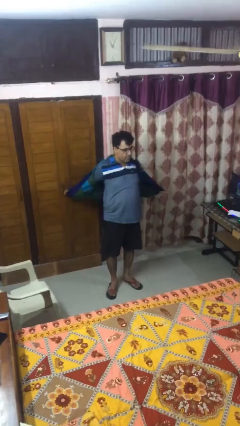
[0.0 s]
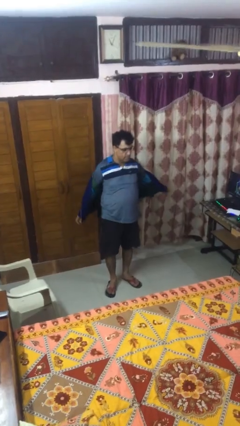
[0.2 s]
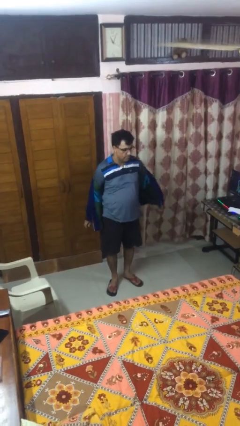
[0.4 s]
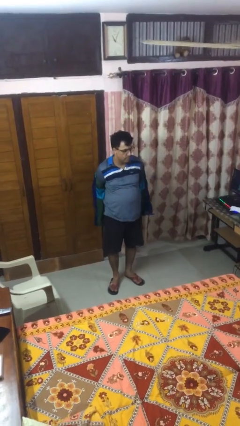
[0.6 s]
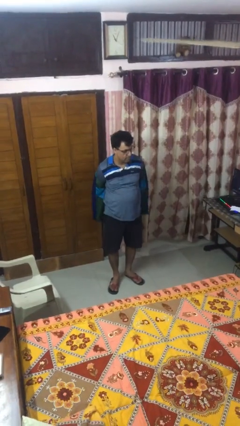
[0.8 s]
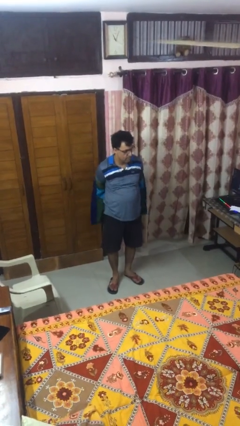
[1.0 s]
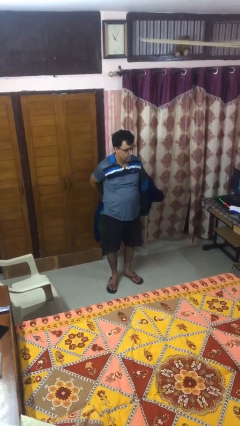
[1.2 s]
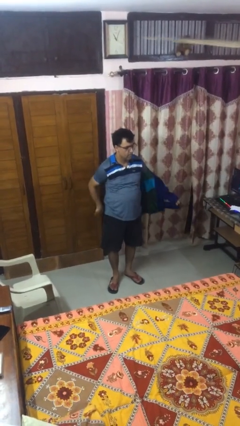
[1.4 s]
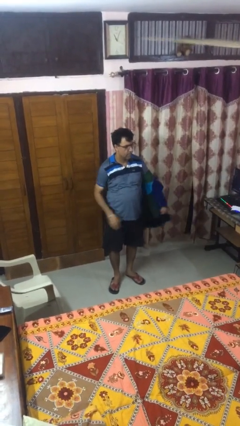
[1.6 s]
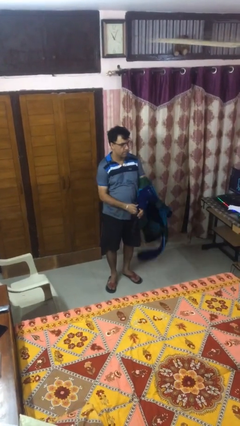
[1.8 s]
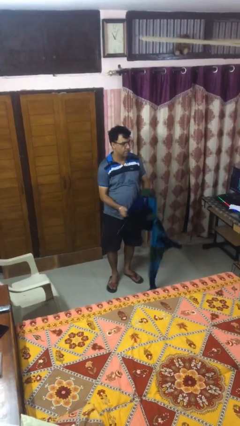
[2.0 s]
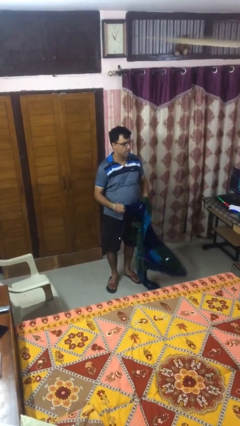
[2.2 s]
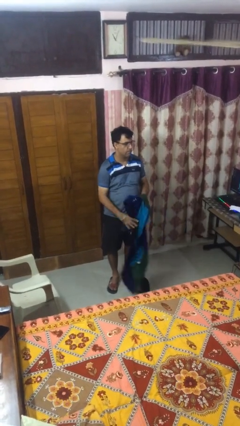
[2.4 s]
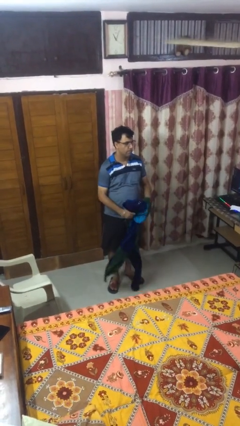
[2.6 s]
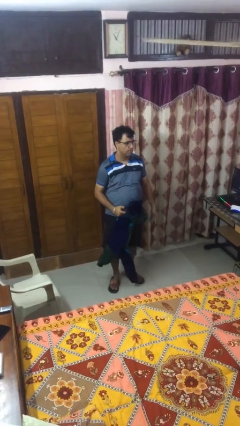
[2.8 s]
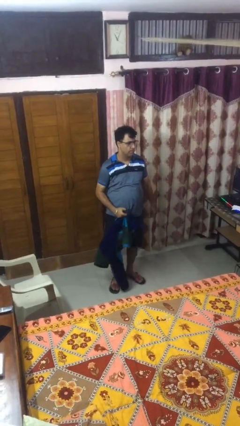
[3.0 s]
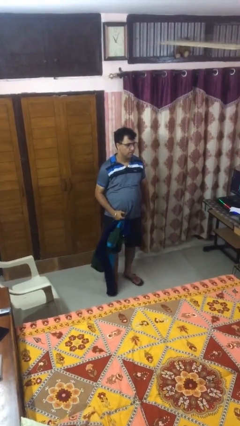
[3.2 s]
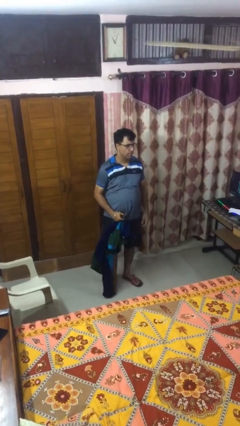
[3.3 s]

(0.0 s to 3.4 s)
person takes off jacket

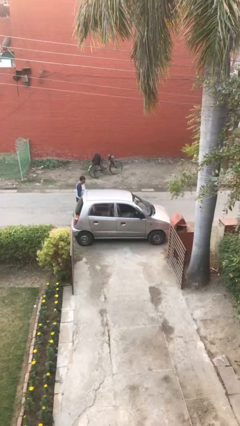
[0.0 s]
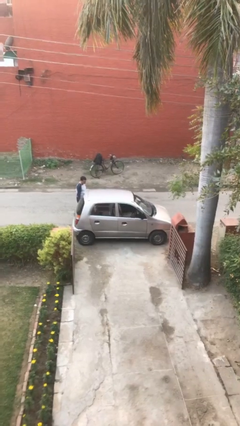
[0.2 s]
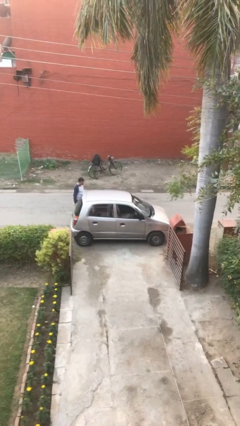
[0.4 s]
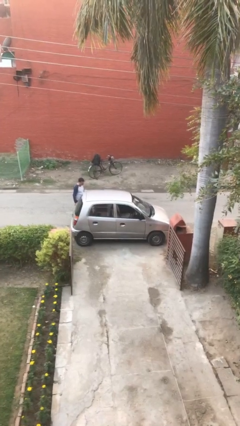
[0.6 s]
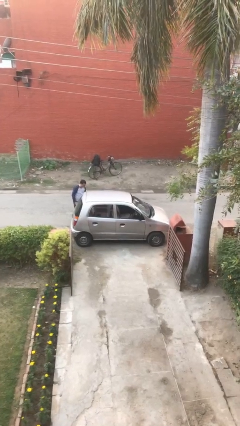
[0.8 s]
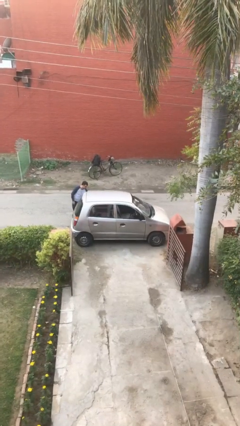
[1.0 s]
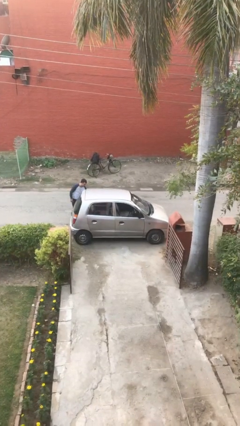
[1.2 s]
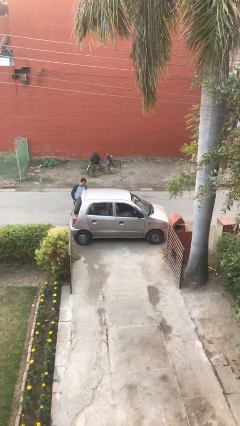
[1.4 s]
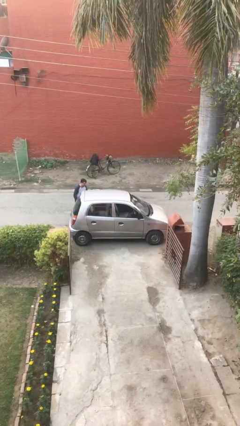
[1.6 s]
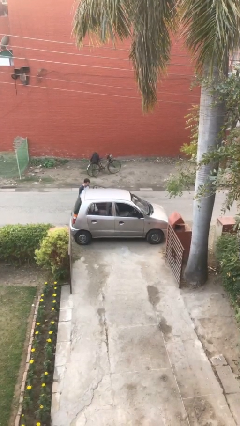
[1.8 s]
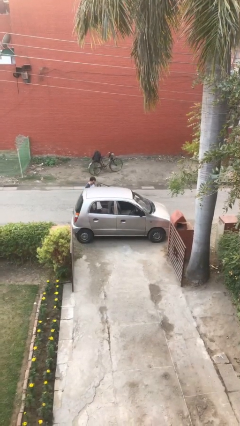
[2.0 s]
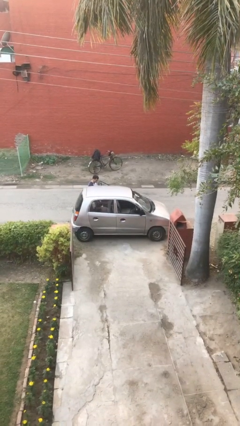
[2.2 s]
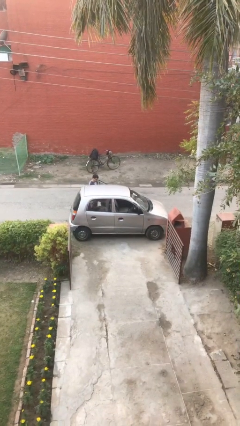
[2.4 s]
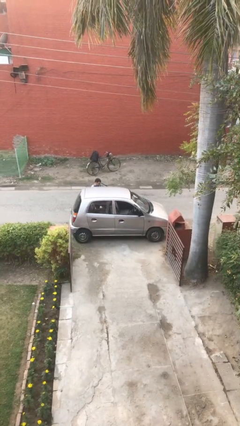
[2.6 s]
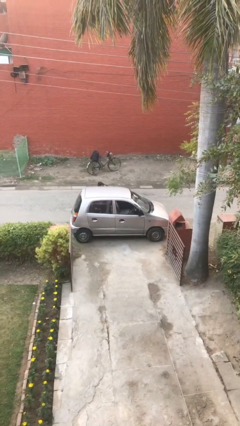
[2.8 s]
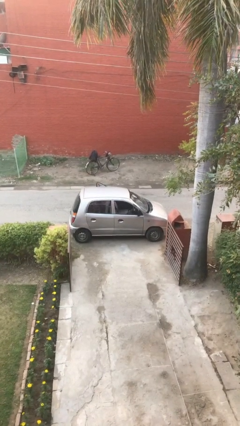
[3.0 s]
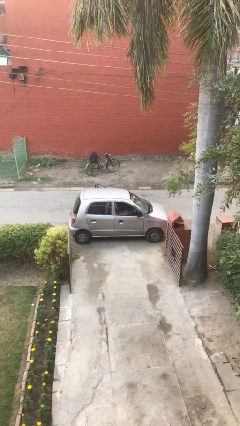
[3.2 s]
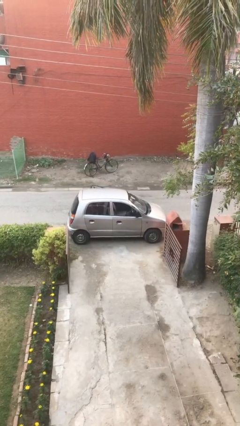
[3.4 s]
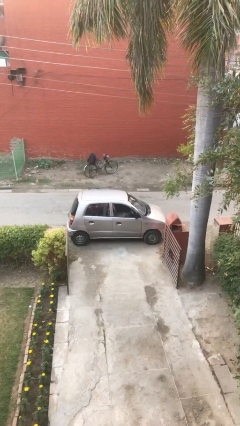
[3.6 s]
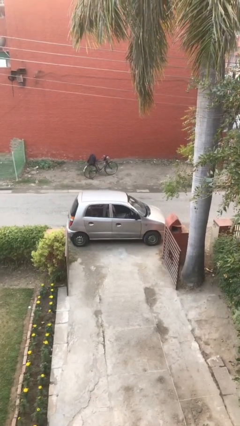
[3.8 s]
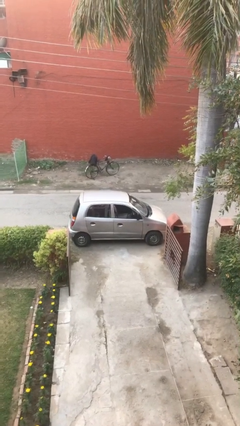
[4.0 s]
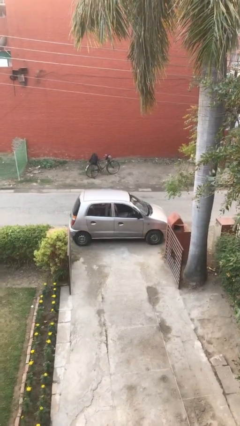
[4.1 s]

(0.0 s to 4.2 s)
car picks up person

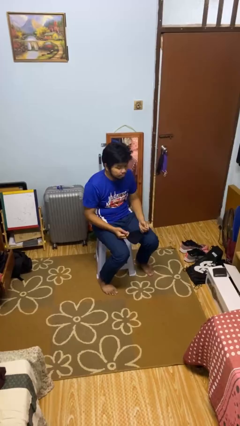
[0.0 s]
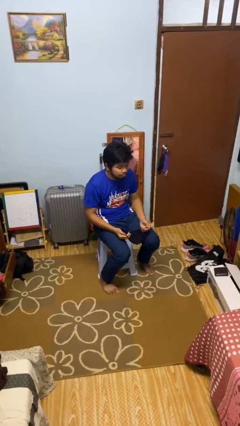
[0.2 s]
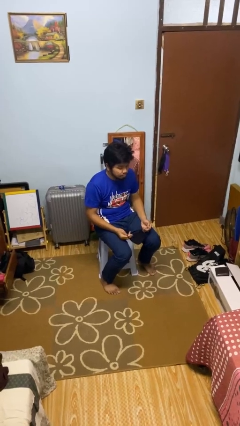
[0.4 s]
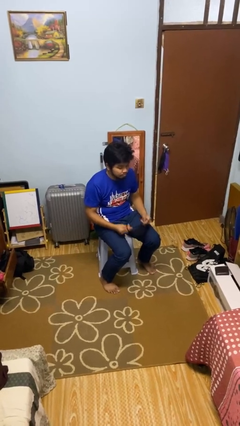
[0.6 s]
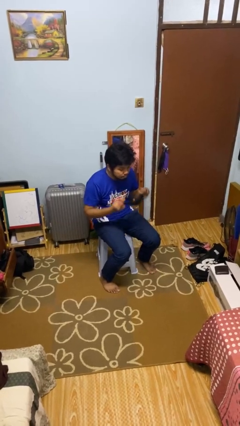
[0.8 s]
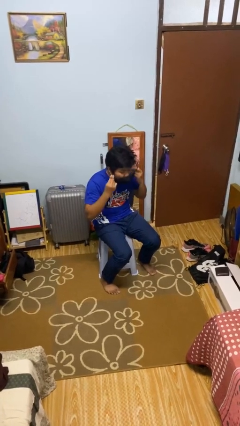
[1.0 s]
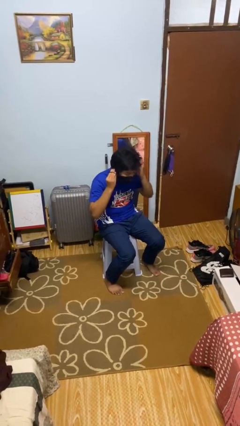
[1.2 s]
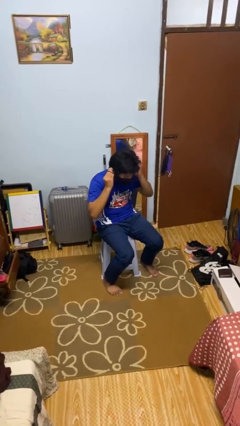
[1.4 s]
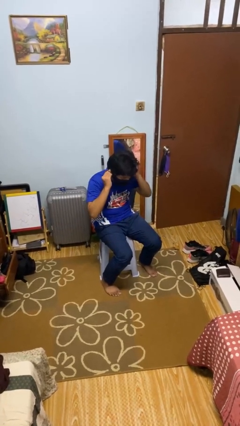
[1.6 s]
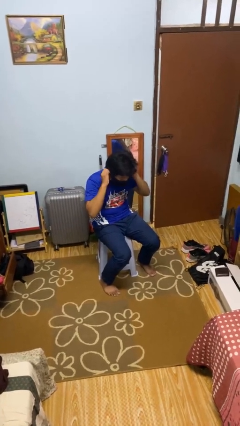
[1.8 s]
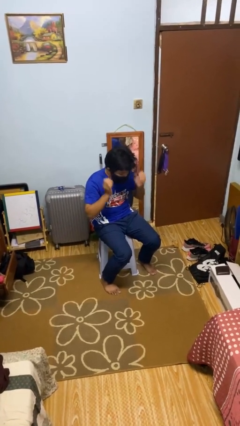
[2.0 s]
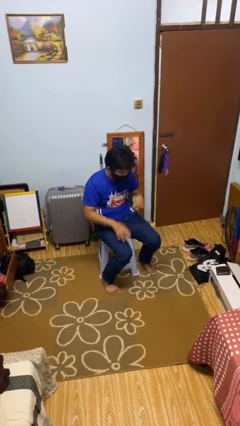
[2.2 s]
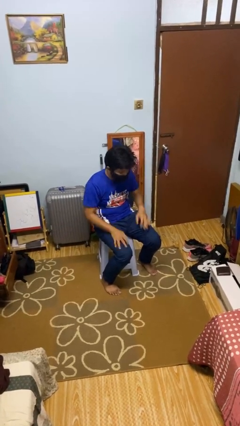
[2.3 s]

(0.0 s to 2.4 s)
person puts on facemask

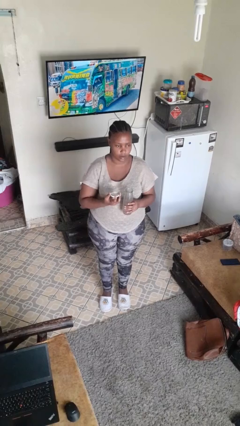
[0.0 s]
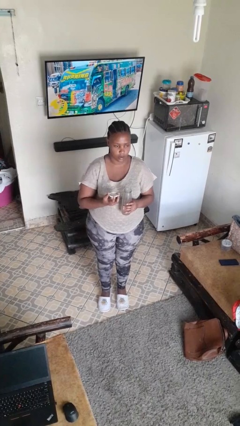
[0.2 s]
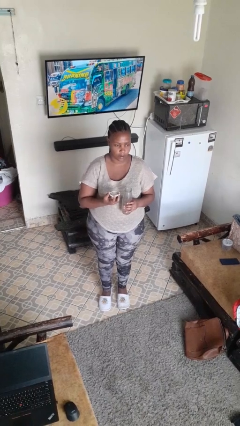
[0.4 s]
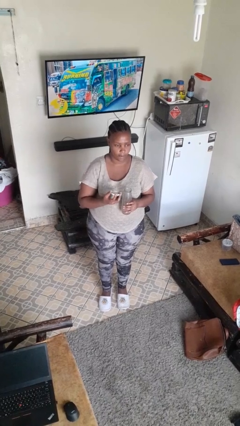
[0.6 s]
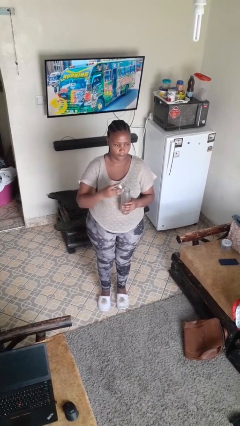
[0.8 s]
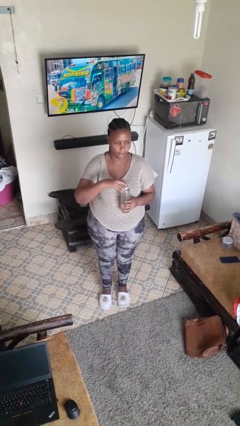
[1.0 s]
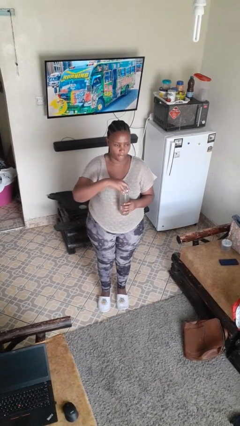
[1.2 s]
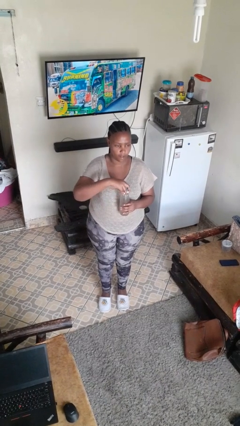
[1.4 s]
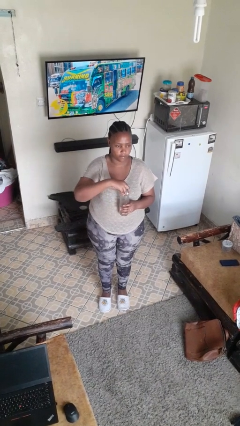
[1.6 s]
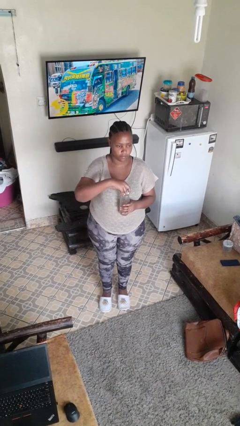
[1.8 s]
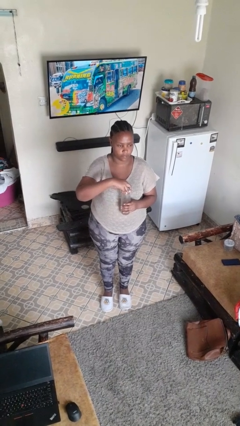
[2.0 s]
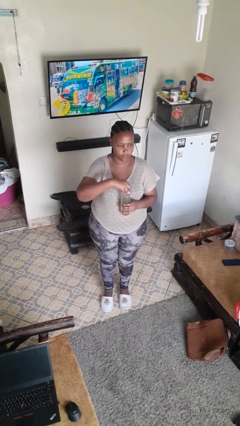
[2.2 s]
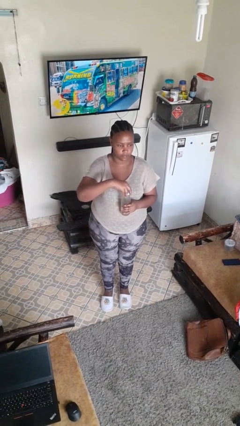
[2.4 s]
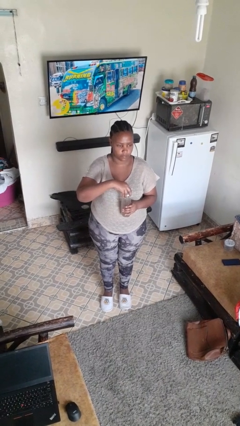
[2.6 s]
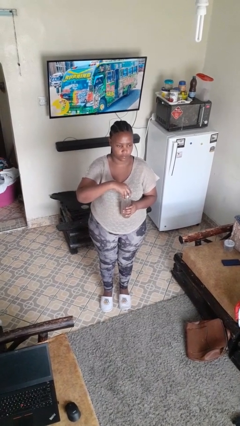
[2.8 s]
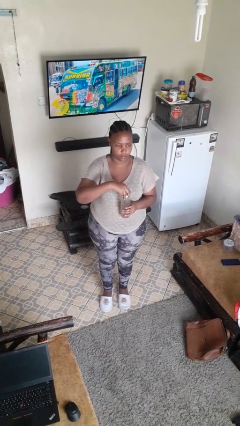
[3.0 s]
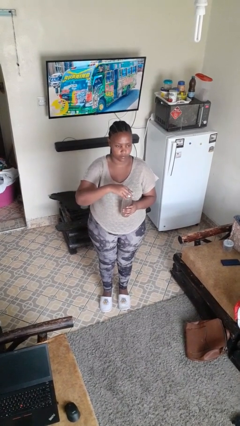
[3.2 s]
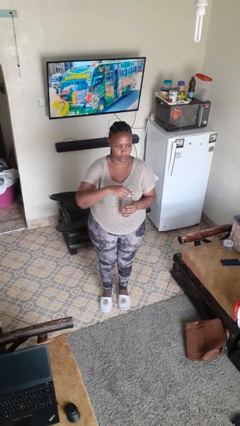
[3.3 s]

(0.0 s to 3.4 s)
person screws lid to bottle

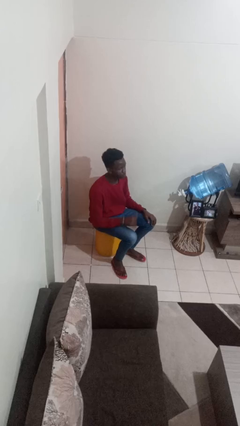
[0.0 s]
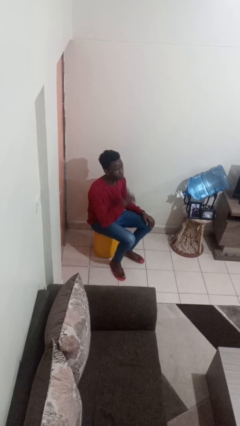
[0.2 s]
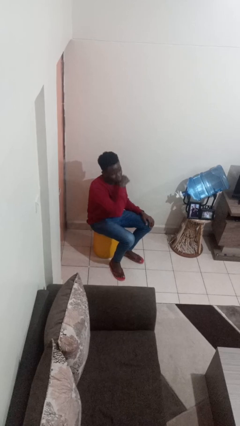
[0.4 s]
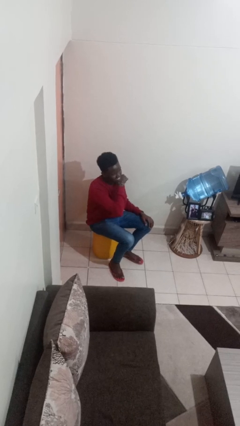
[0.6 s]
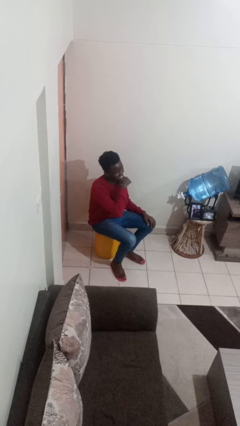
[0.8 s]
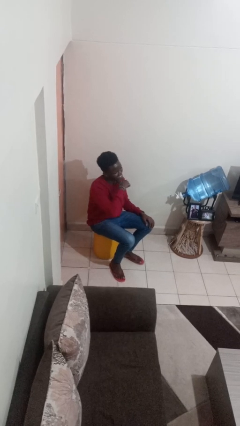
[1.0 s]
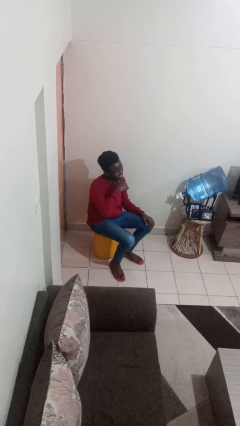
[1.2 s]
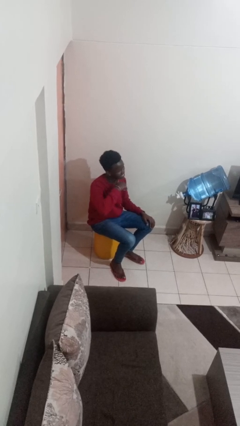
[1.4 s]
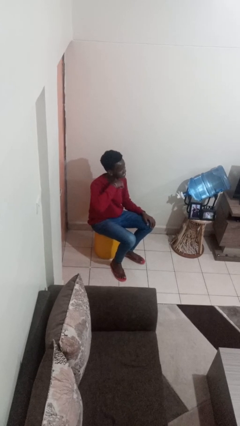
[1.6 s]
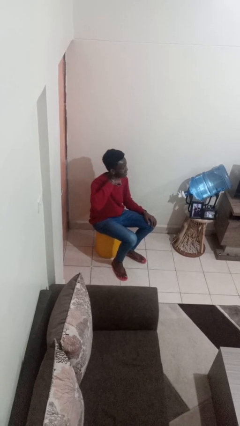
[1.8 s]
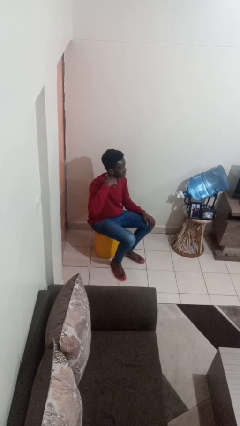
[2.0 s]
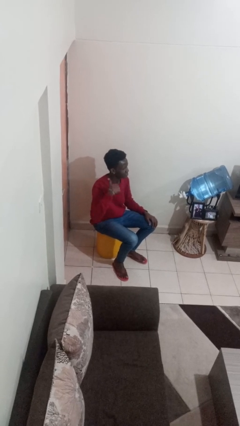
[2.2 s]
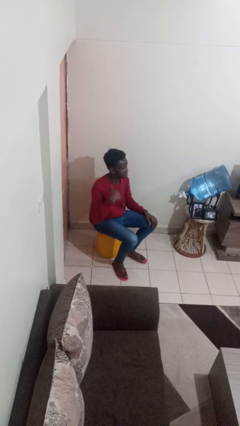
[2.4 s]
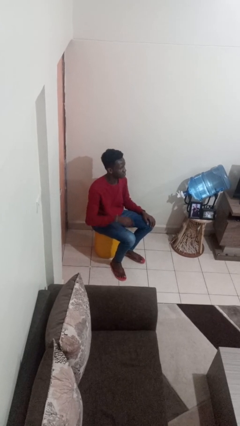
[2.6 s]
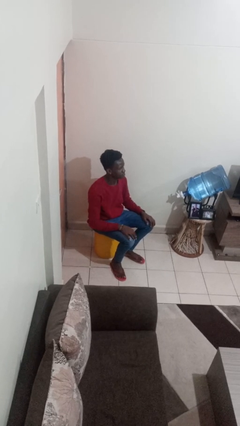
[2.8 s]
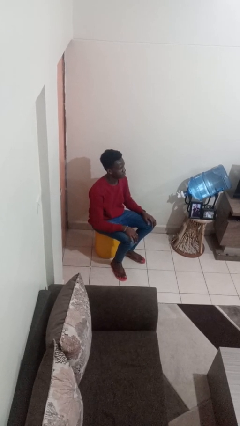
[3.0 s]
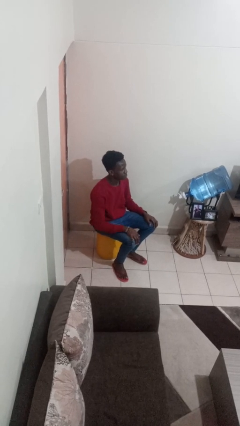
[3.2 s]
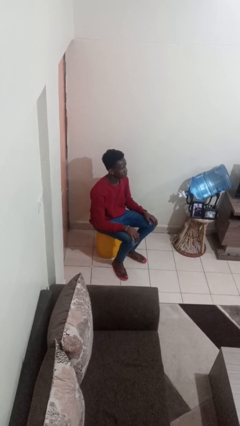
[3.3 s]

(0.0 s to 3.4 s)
person gestures cut

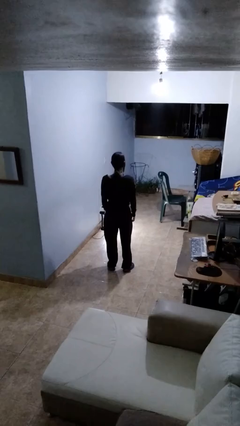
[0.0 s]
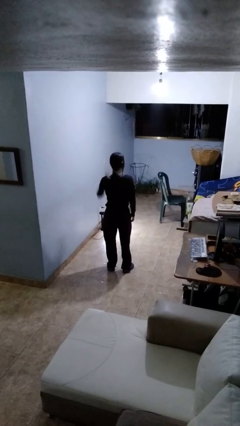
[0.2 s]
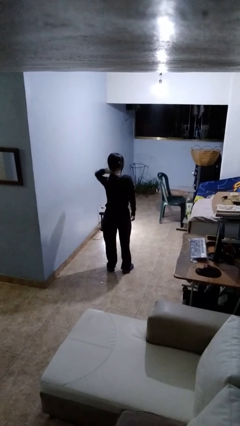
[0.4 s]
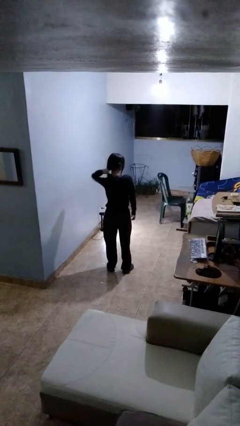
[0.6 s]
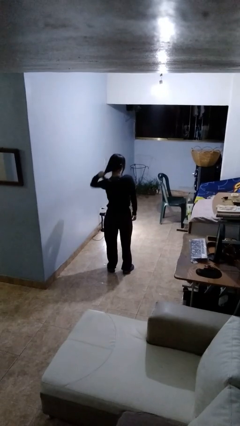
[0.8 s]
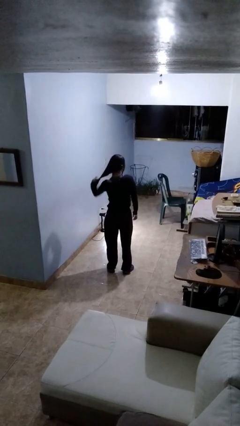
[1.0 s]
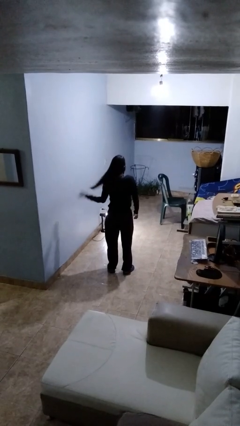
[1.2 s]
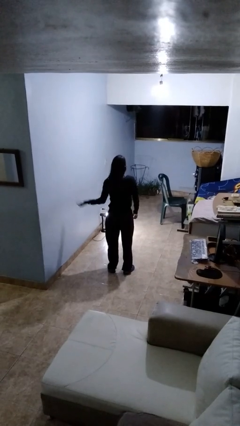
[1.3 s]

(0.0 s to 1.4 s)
person takes off hairtie
